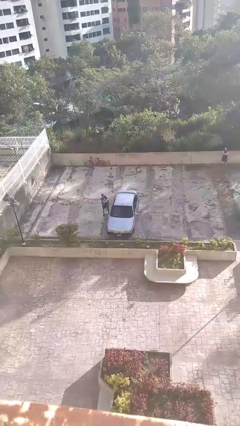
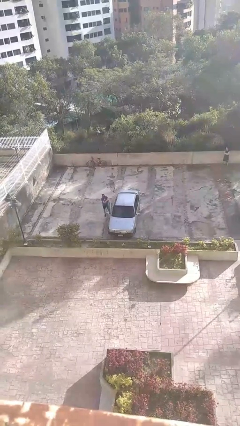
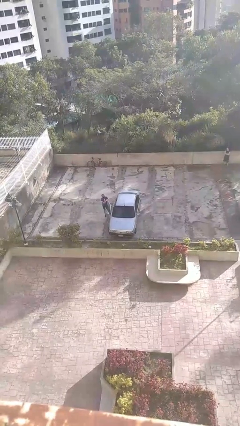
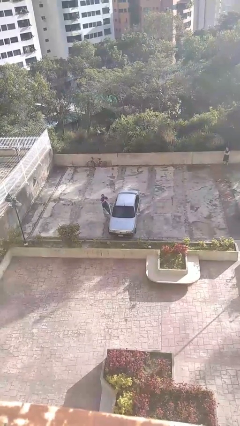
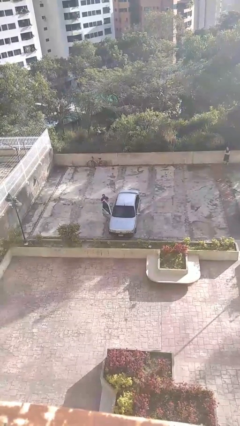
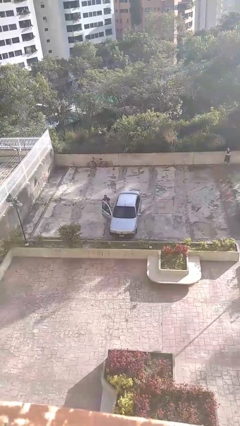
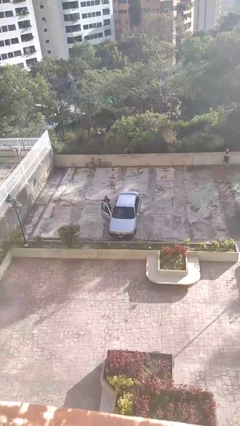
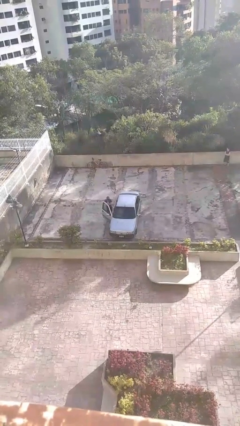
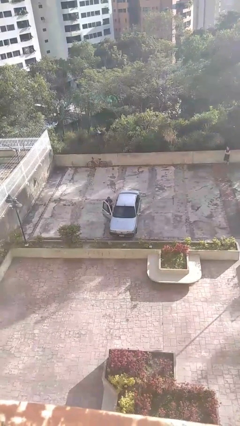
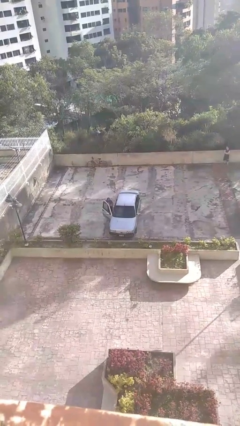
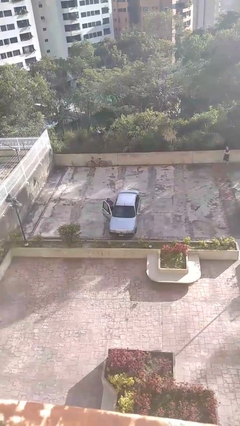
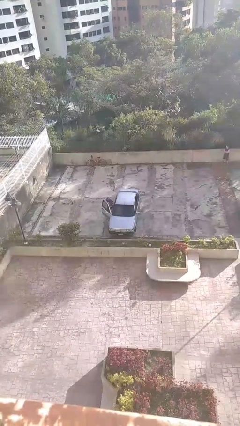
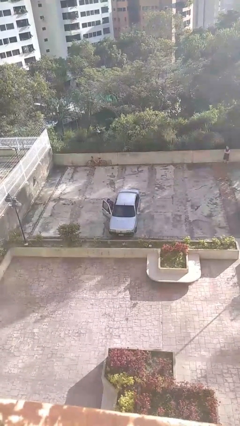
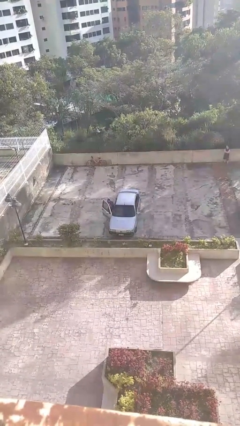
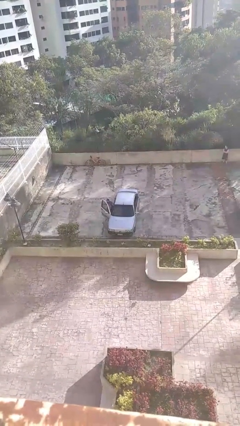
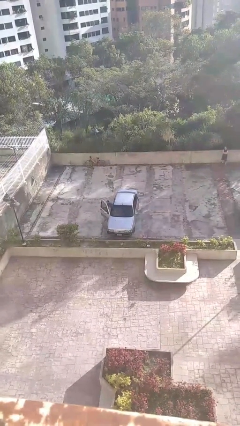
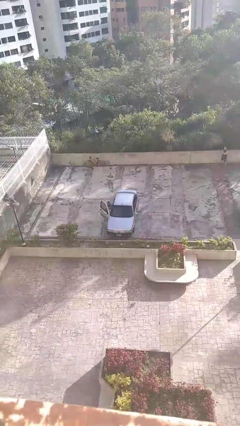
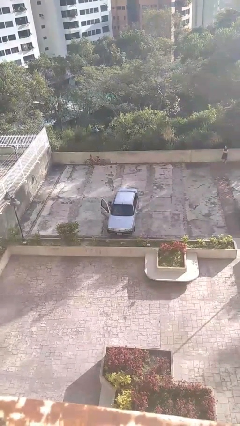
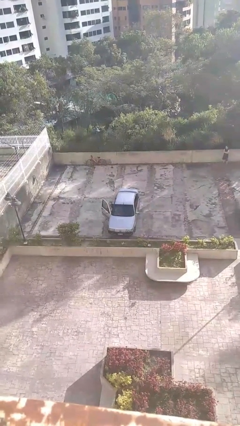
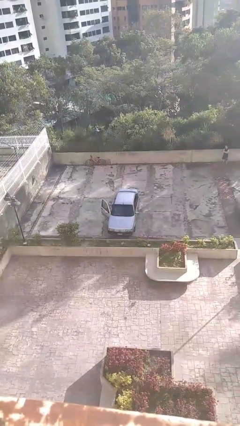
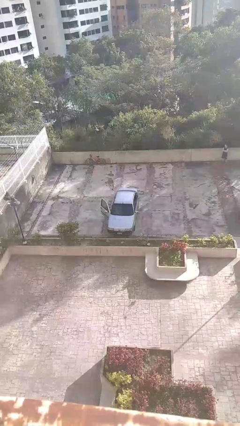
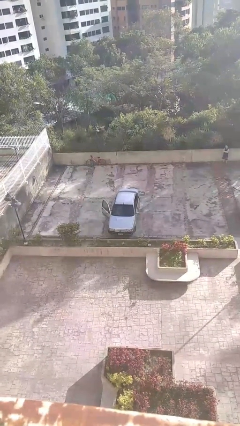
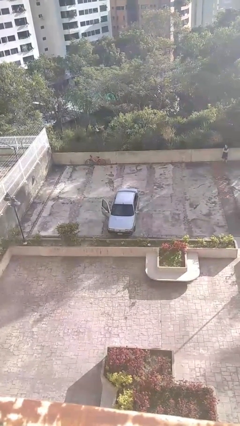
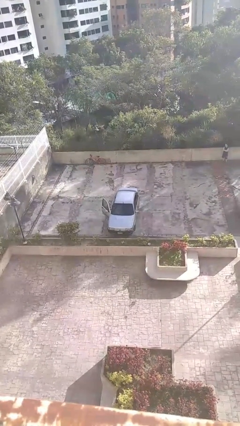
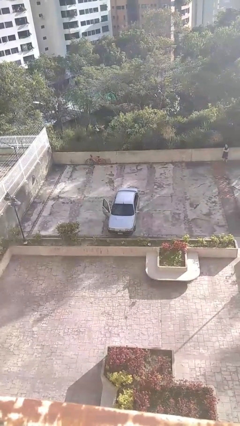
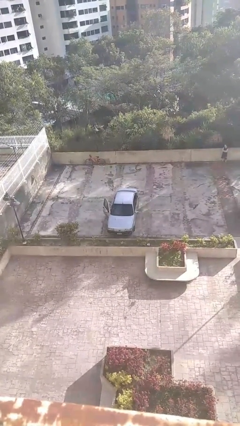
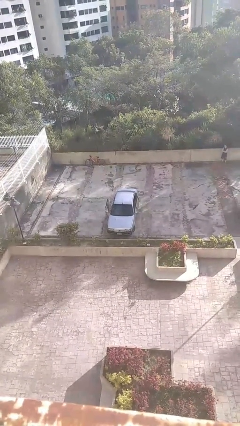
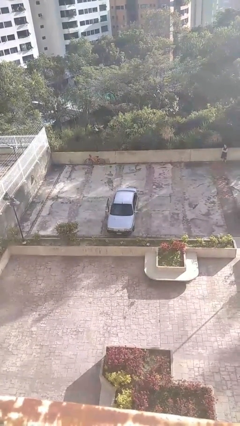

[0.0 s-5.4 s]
car picks up person

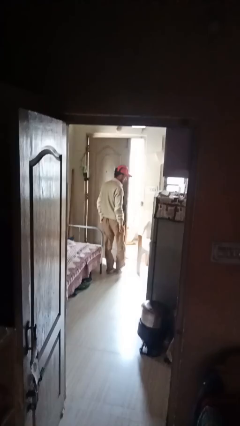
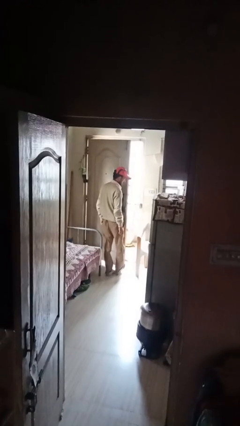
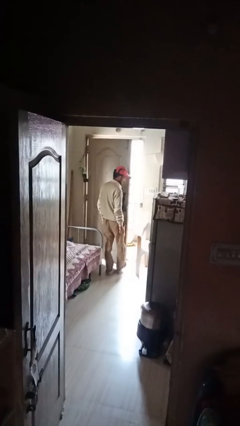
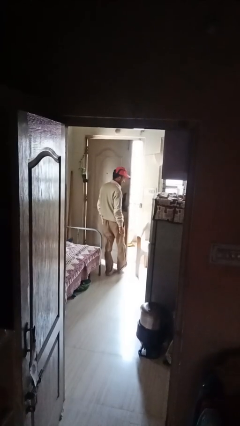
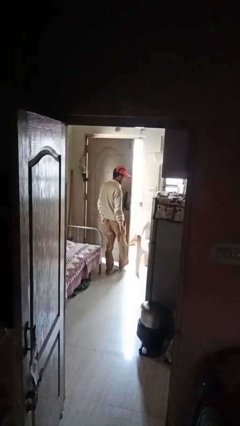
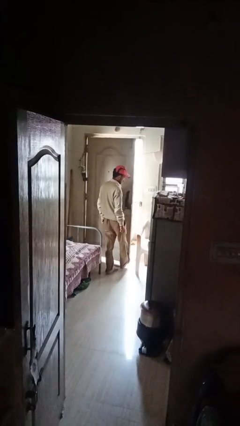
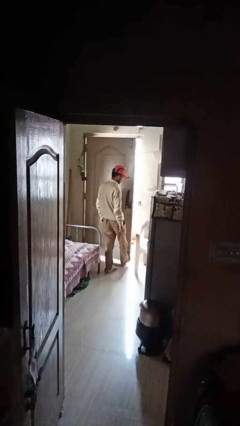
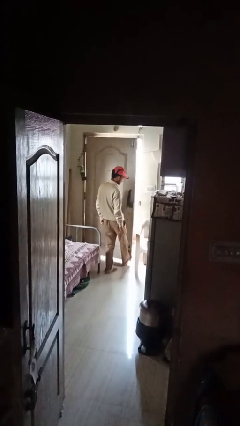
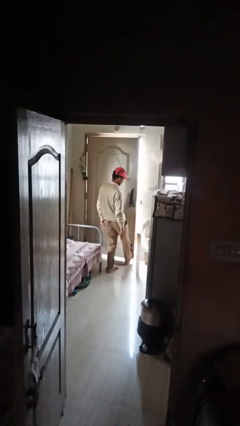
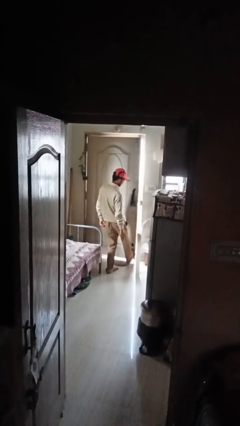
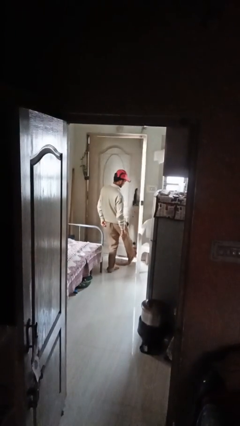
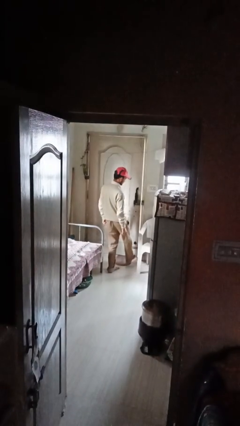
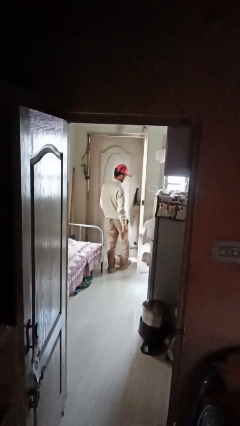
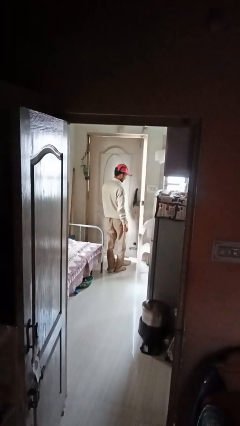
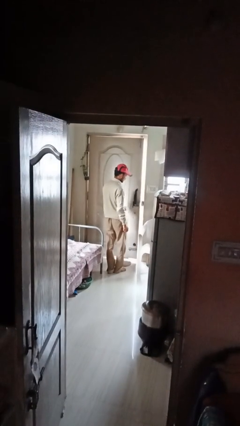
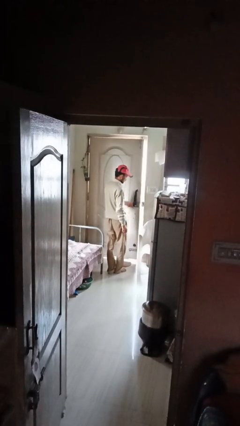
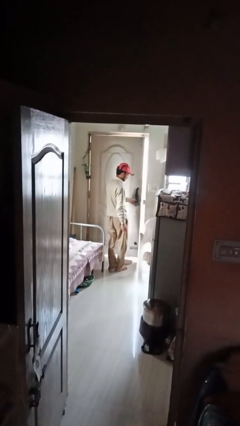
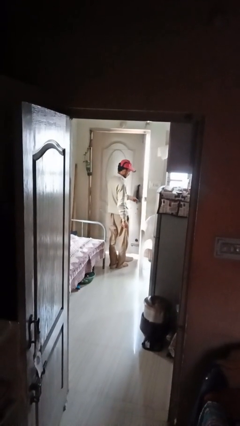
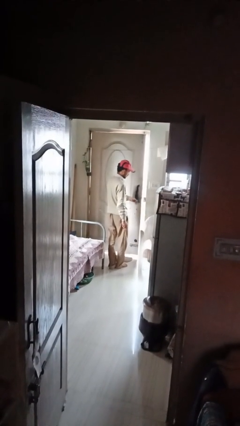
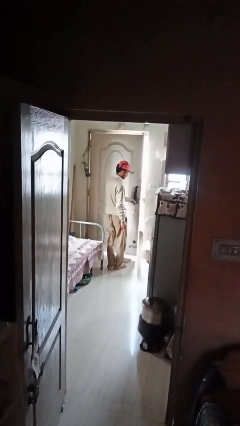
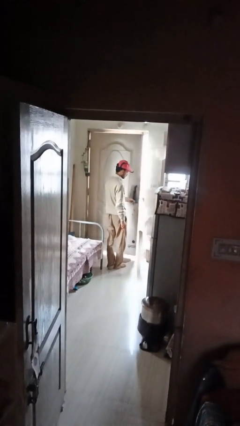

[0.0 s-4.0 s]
person closes door with foot

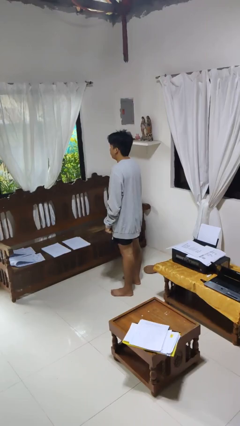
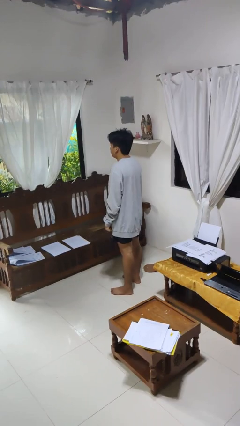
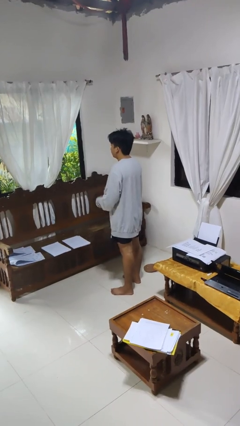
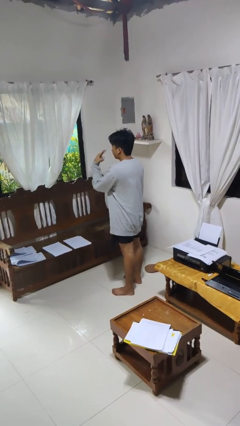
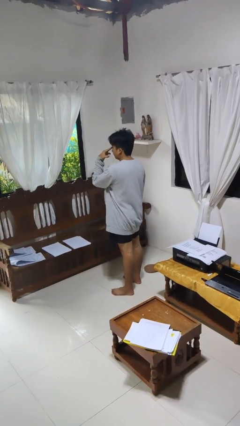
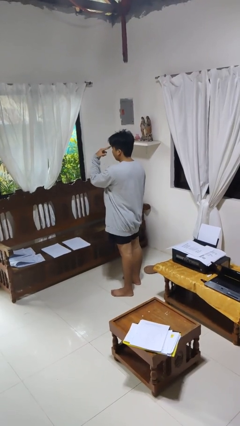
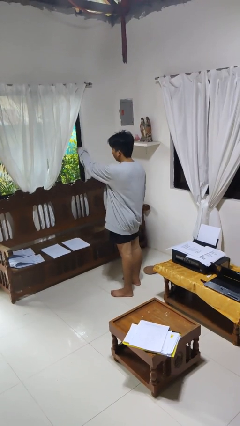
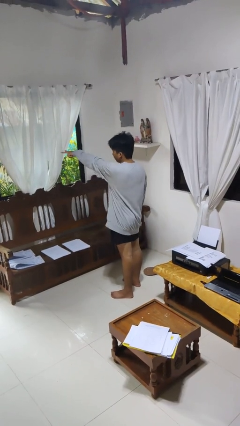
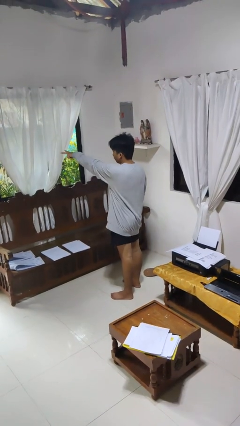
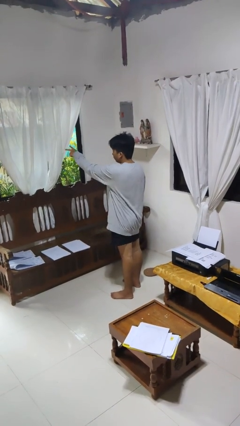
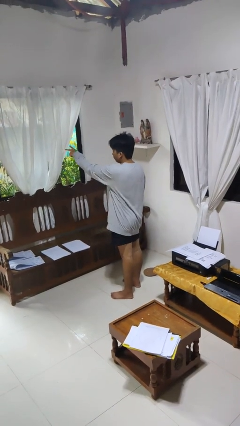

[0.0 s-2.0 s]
person gestures watch closely

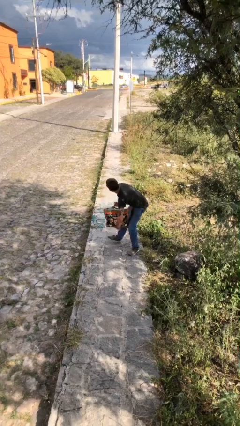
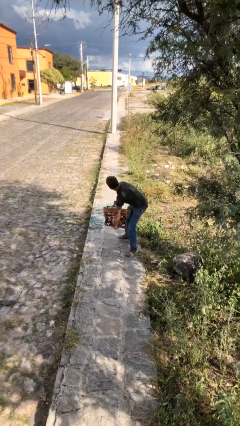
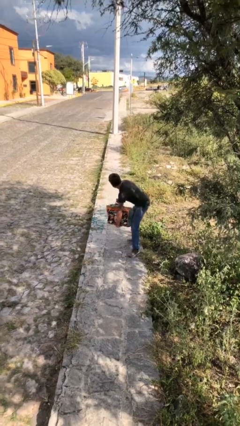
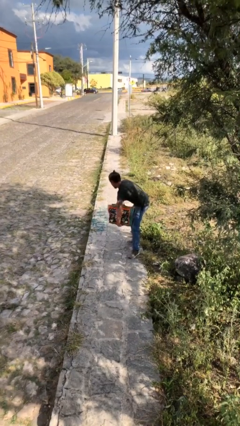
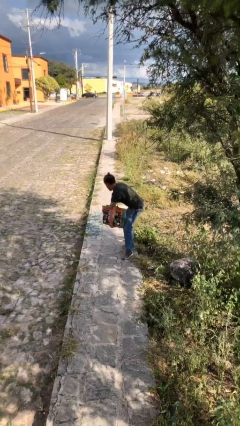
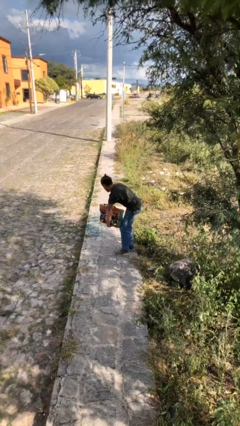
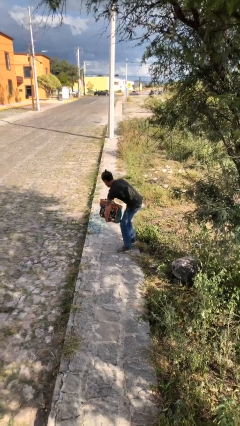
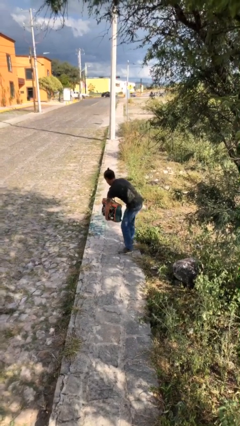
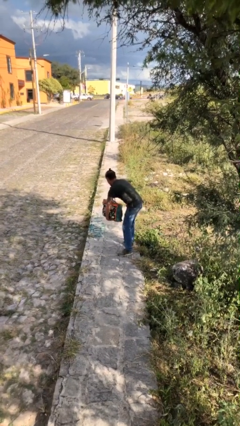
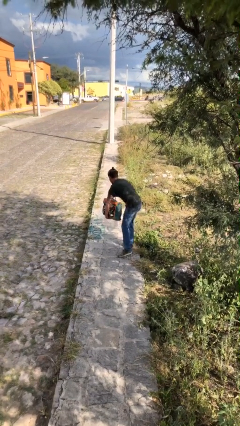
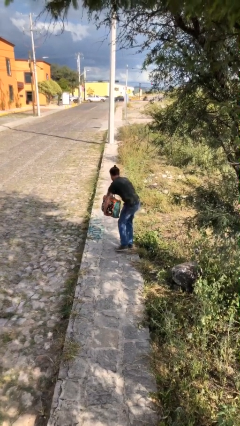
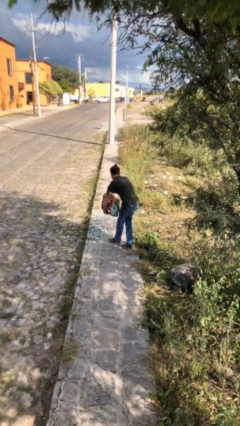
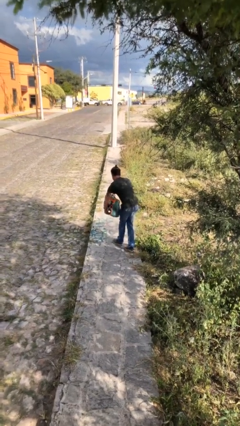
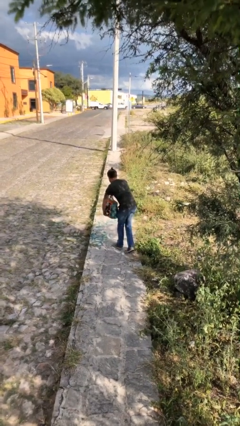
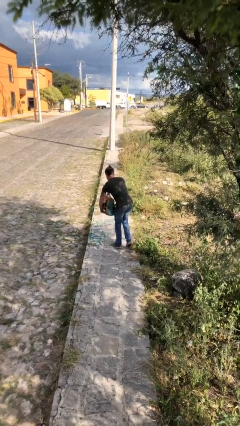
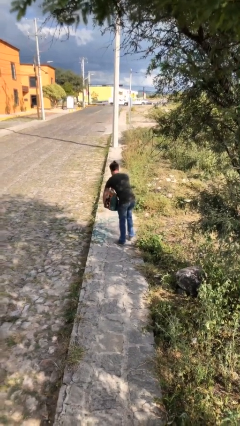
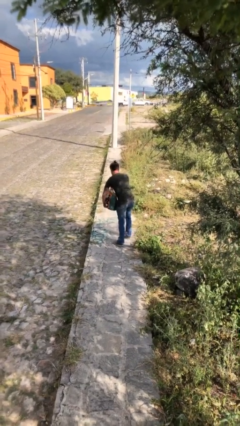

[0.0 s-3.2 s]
person carries heavy object

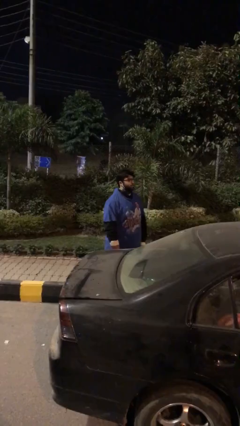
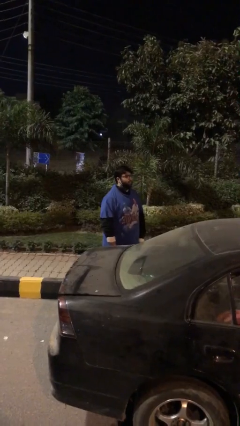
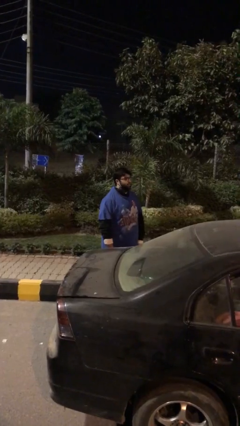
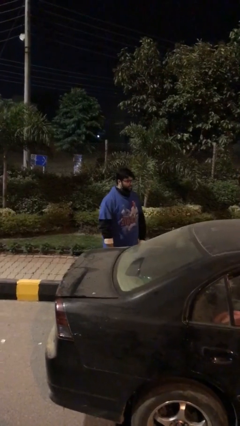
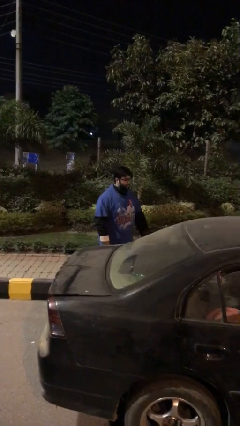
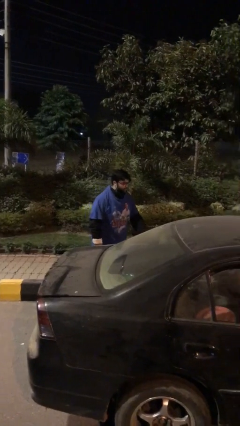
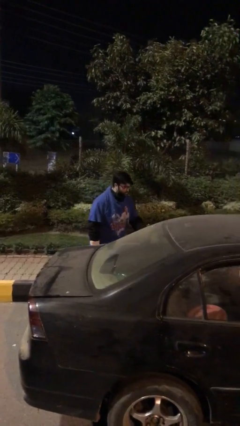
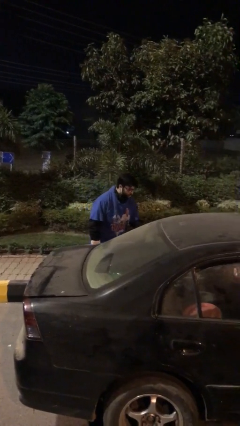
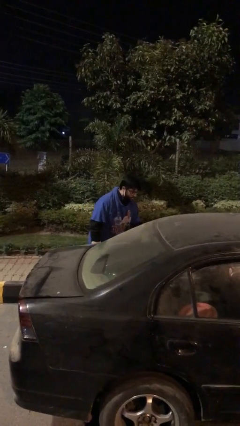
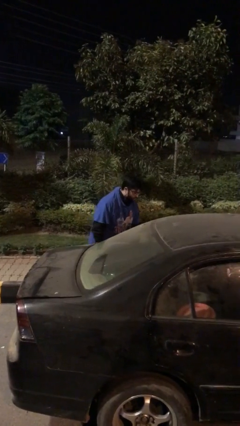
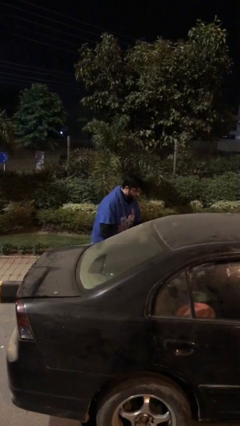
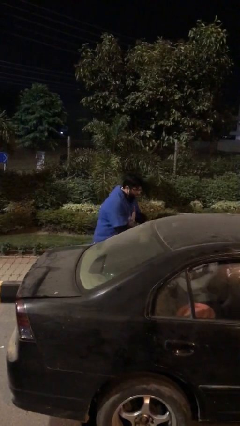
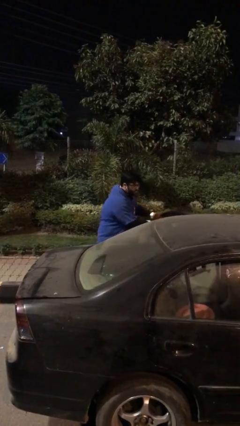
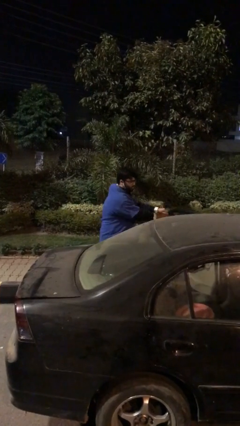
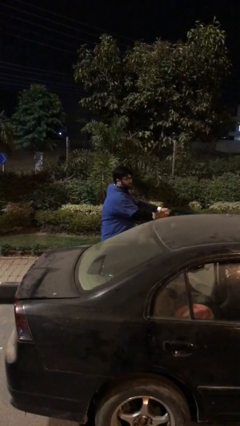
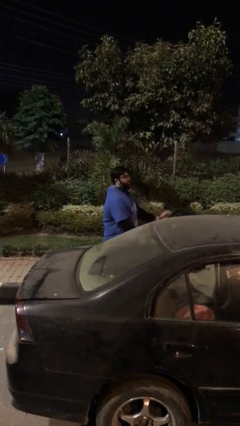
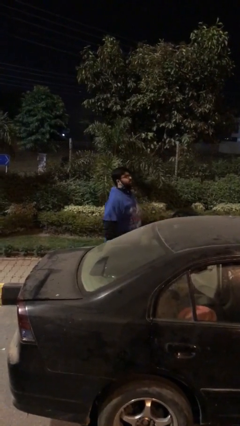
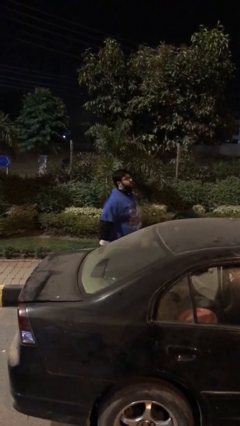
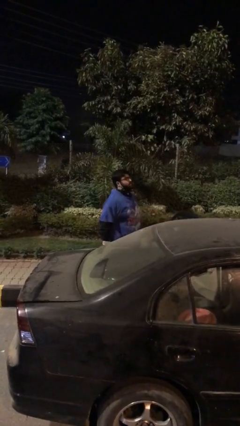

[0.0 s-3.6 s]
person opens car door
